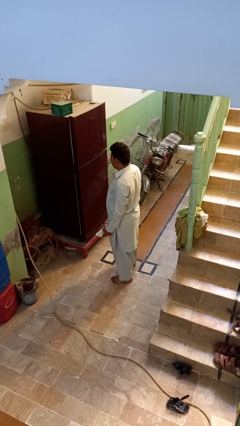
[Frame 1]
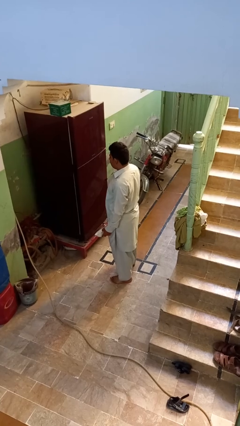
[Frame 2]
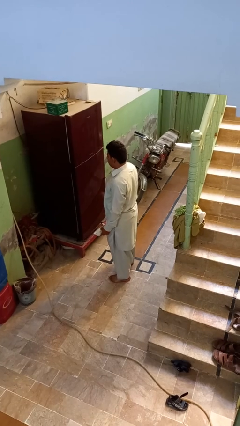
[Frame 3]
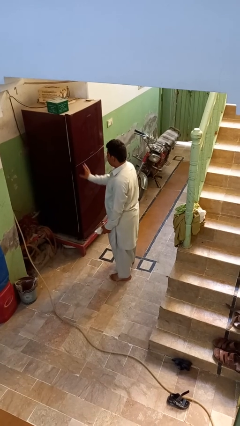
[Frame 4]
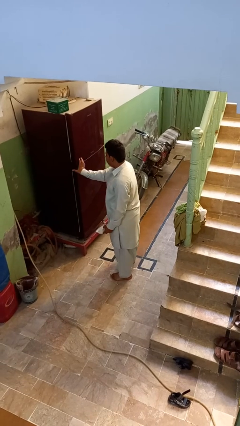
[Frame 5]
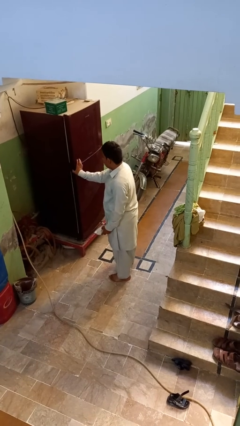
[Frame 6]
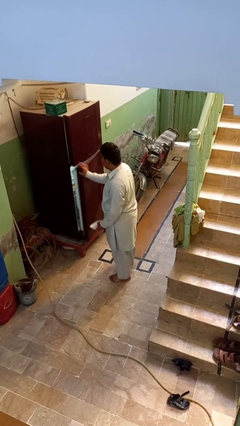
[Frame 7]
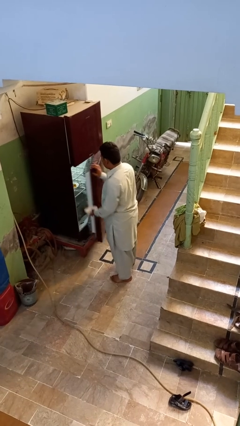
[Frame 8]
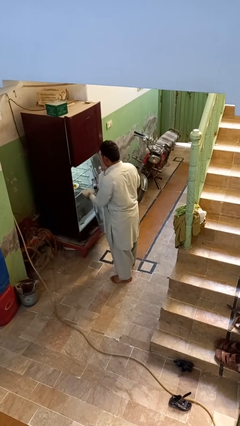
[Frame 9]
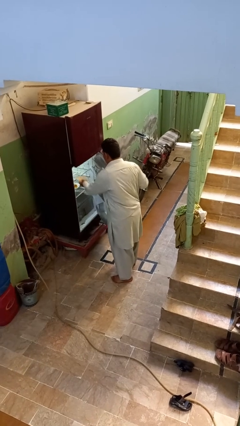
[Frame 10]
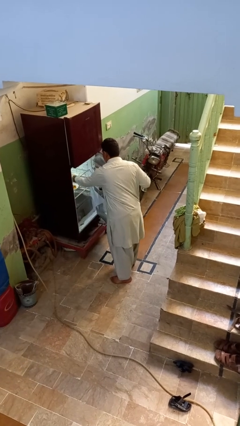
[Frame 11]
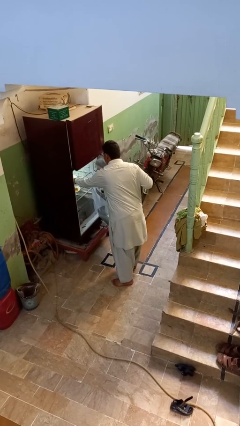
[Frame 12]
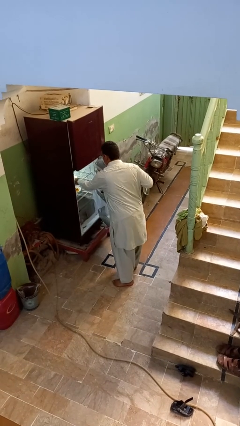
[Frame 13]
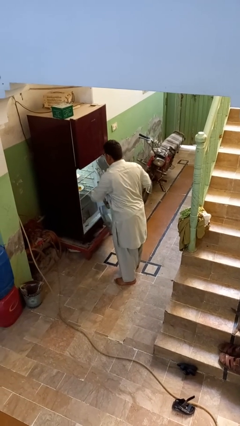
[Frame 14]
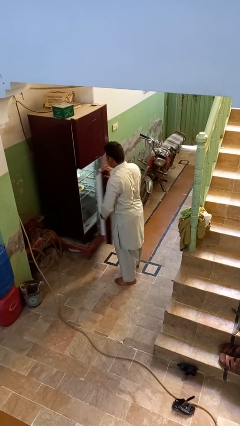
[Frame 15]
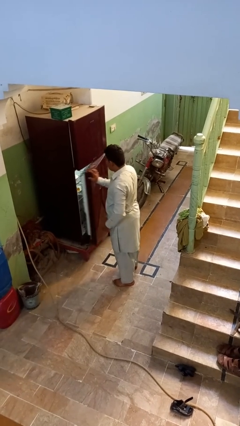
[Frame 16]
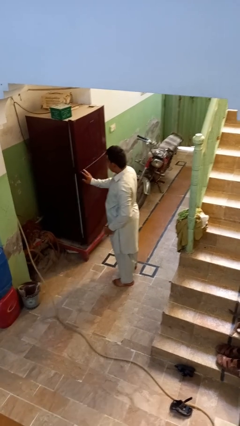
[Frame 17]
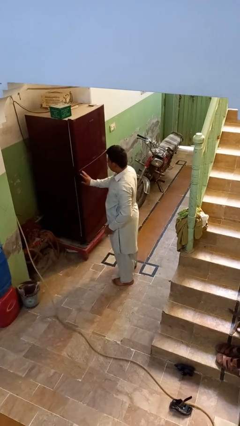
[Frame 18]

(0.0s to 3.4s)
person puts object into refrigerator

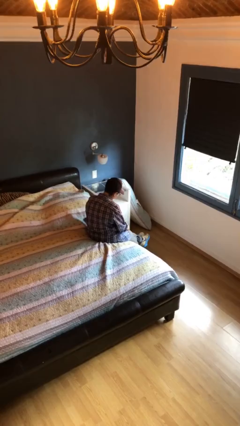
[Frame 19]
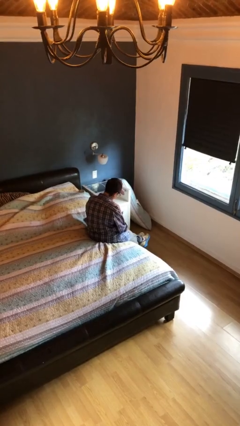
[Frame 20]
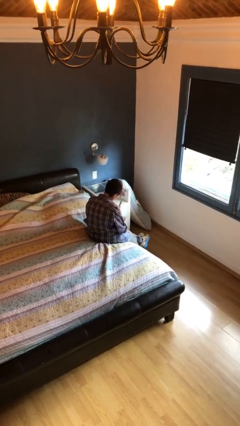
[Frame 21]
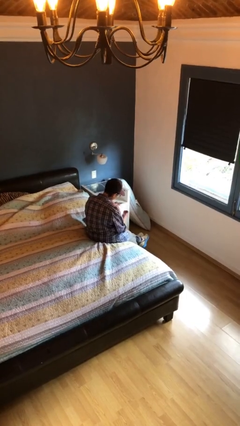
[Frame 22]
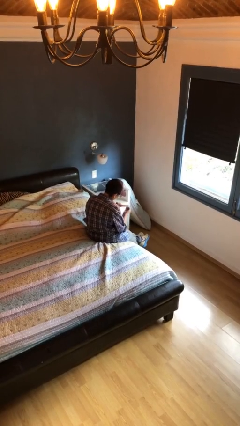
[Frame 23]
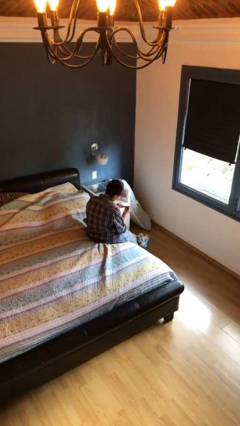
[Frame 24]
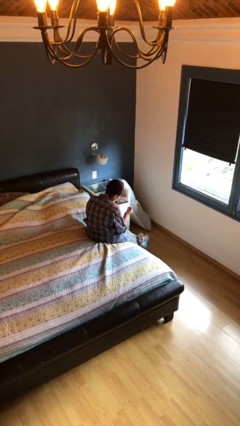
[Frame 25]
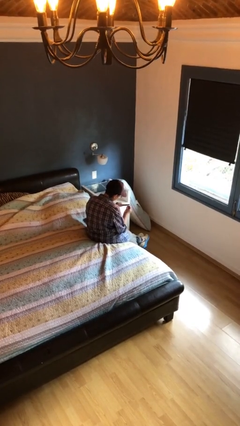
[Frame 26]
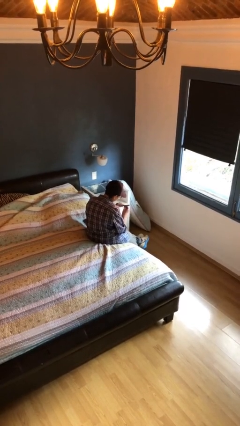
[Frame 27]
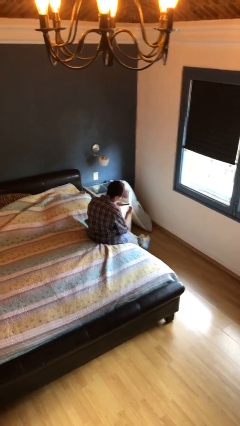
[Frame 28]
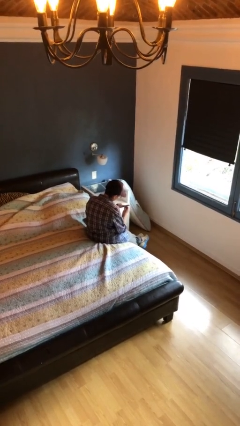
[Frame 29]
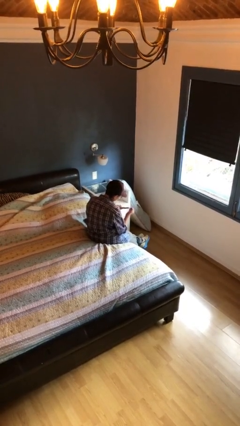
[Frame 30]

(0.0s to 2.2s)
person files fingernails

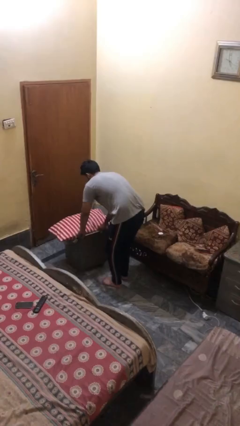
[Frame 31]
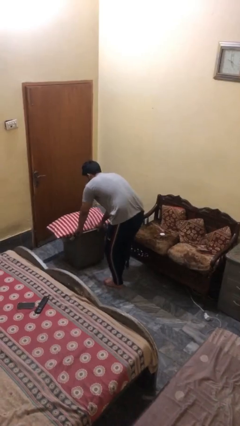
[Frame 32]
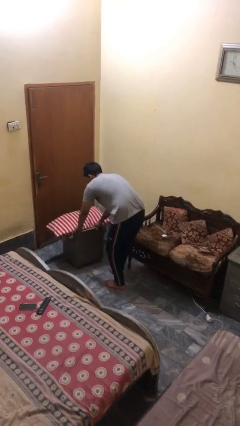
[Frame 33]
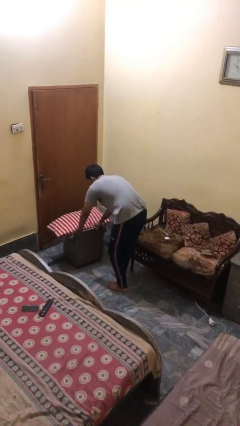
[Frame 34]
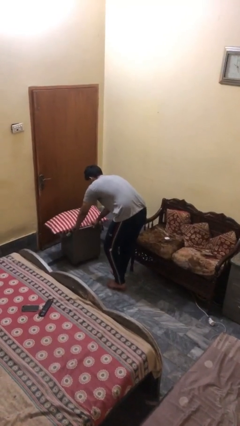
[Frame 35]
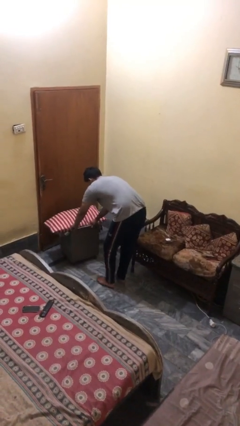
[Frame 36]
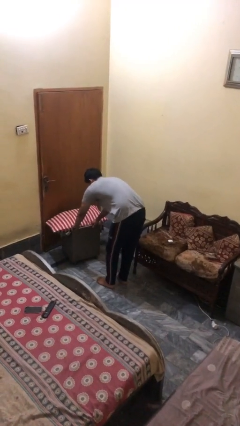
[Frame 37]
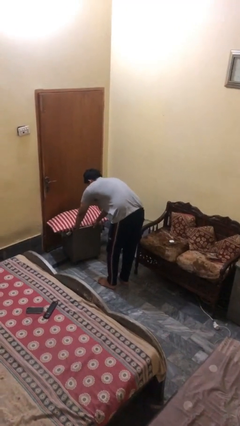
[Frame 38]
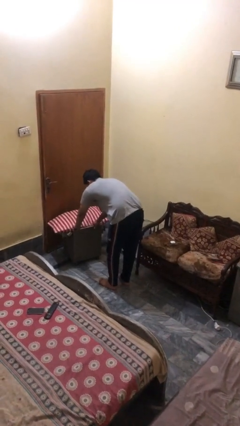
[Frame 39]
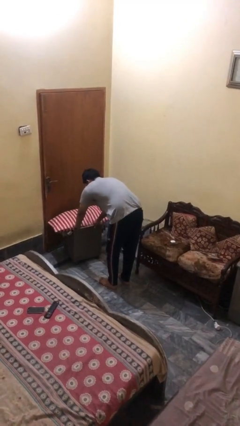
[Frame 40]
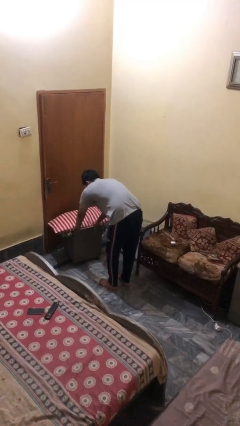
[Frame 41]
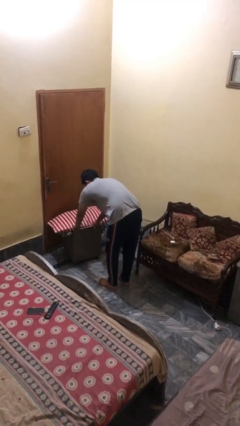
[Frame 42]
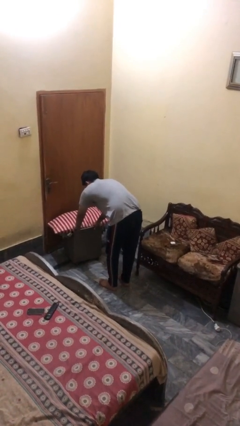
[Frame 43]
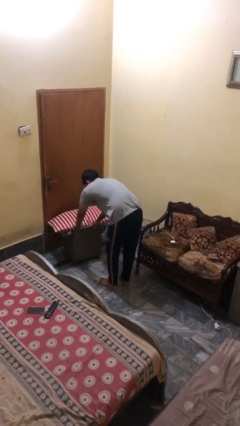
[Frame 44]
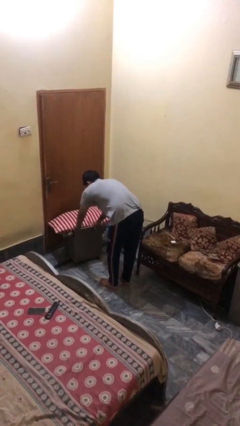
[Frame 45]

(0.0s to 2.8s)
person pushes wheeled cart

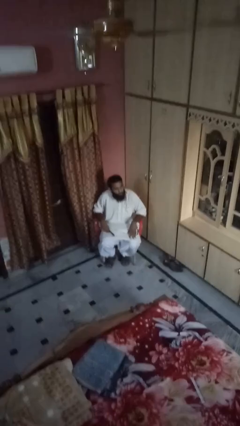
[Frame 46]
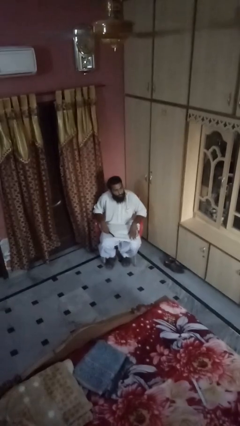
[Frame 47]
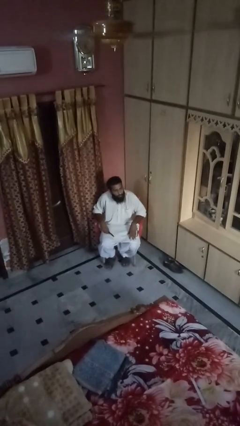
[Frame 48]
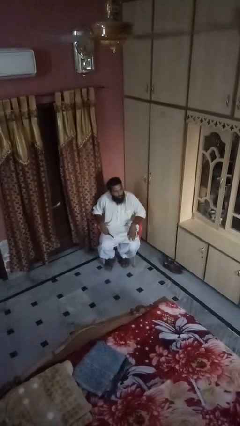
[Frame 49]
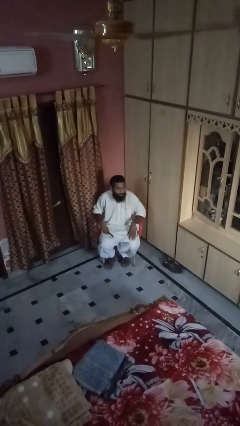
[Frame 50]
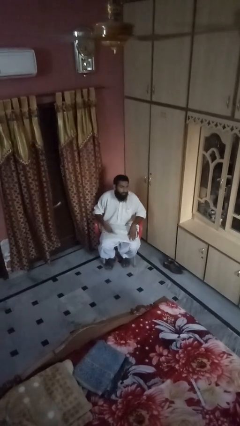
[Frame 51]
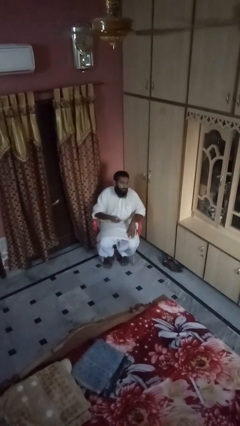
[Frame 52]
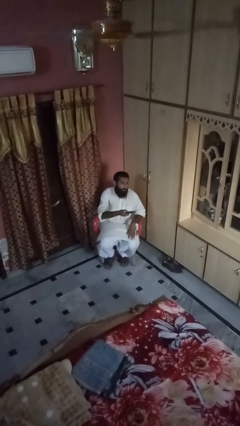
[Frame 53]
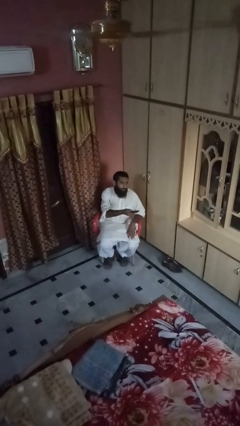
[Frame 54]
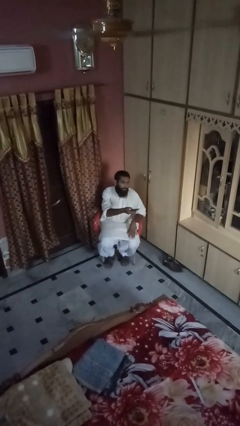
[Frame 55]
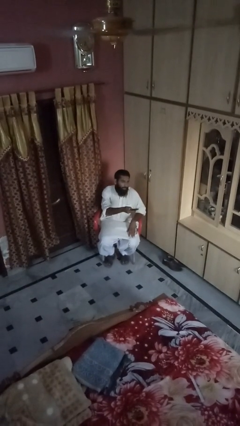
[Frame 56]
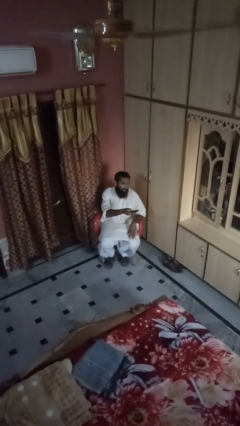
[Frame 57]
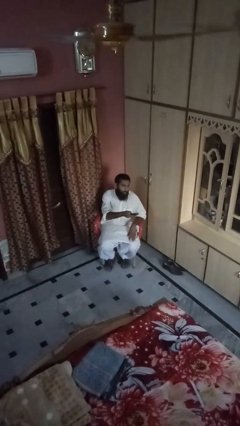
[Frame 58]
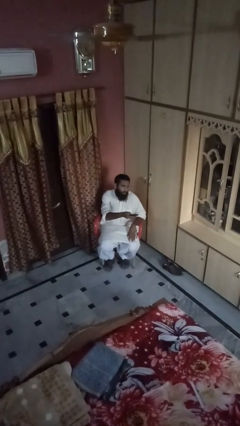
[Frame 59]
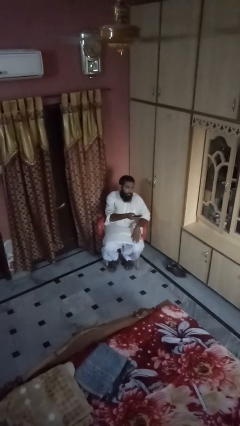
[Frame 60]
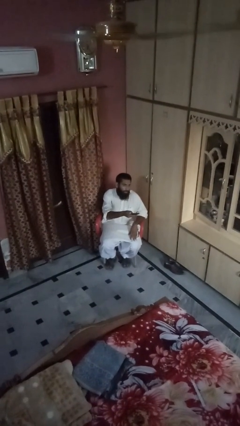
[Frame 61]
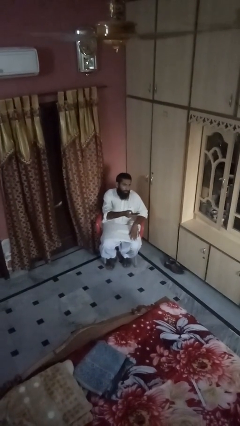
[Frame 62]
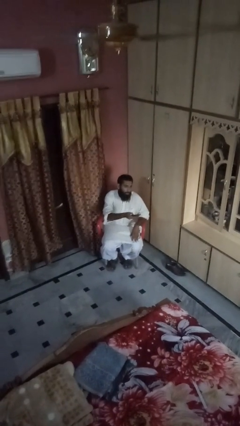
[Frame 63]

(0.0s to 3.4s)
person uses television remote

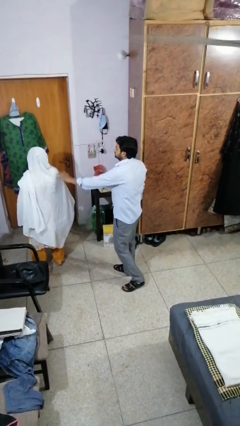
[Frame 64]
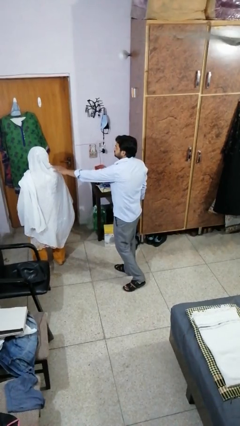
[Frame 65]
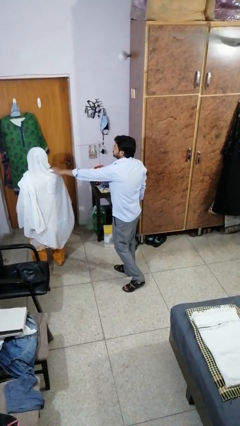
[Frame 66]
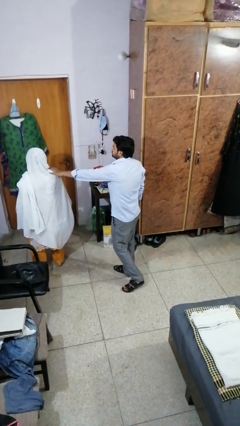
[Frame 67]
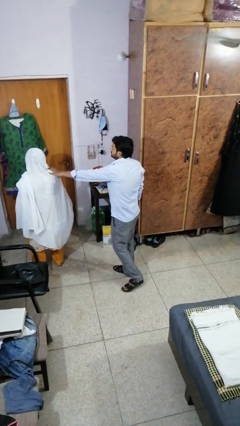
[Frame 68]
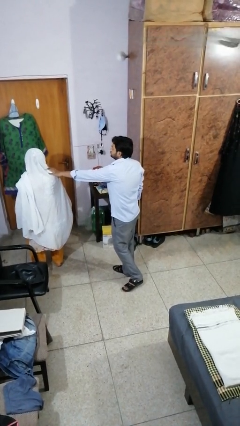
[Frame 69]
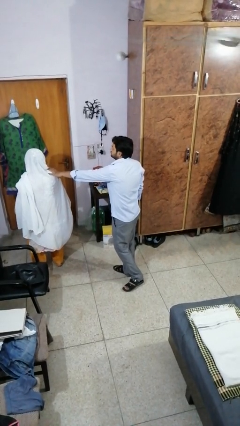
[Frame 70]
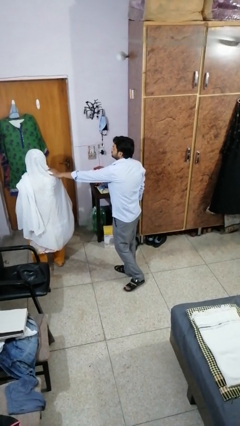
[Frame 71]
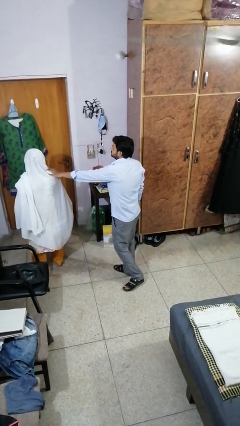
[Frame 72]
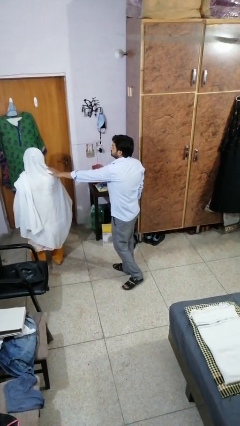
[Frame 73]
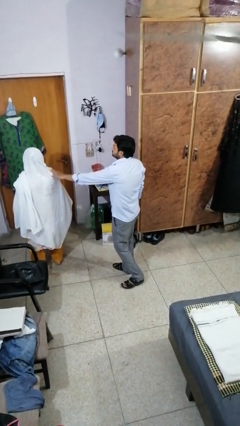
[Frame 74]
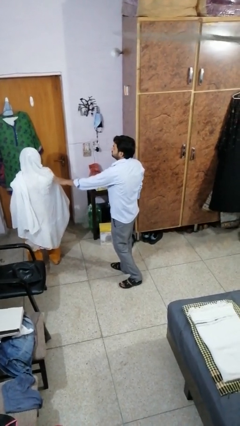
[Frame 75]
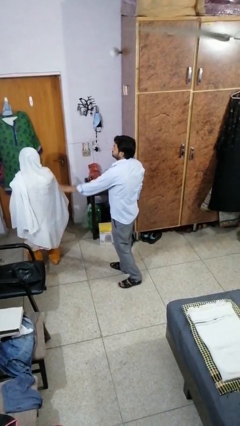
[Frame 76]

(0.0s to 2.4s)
person touches back of person

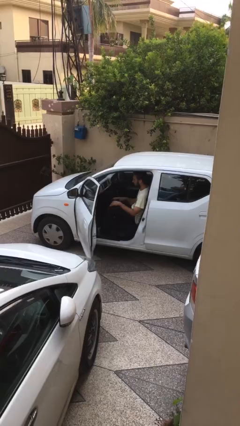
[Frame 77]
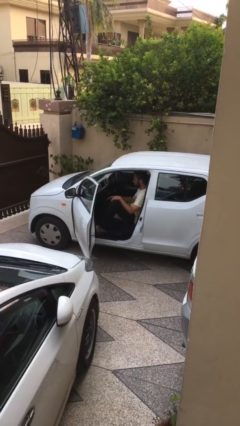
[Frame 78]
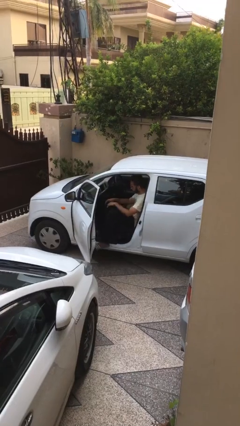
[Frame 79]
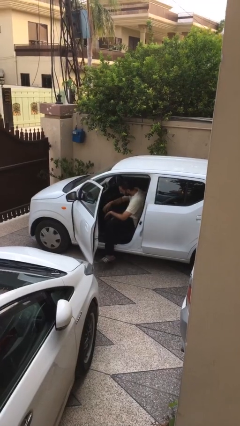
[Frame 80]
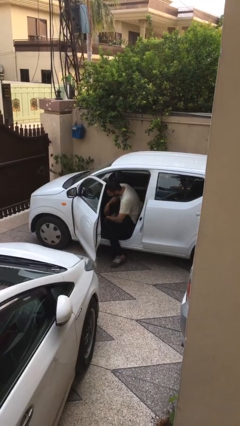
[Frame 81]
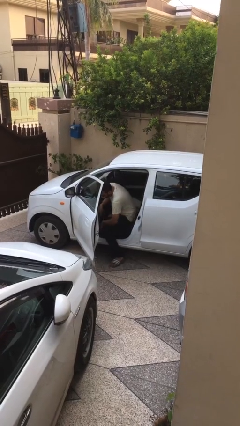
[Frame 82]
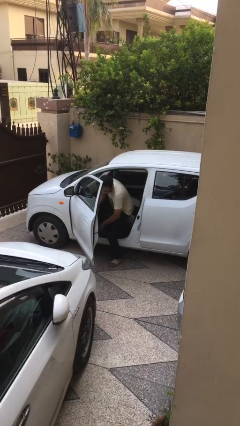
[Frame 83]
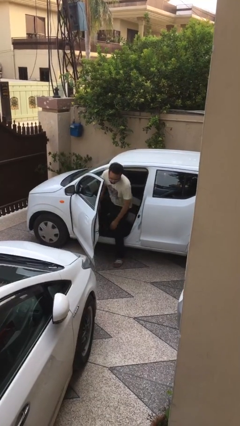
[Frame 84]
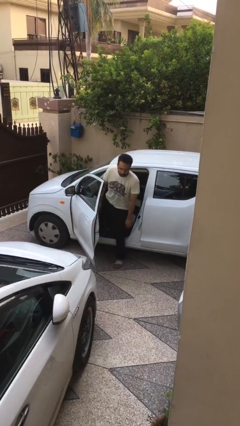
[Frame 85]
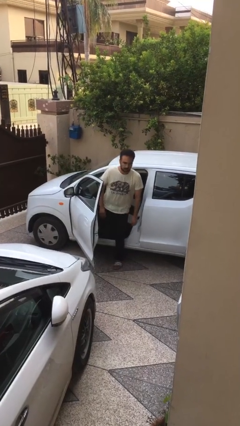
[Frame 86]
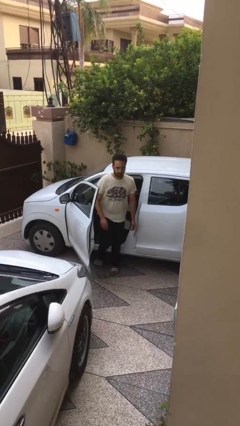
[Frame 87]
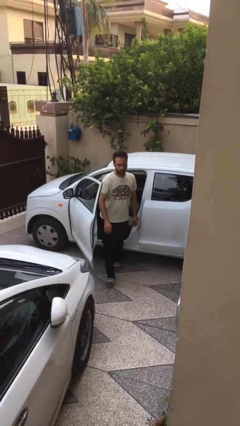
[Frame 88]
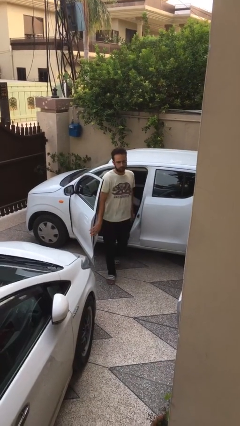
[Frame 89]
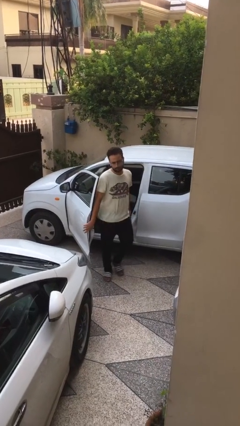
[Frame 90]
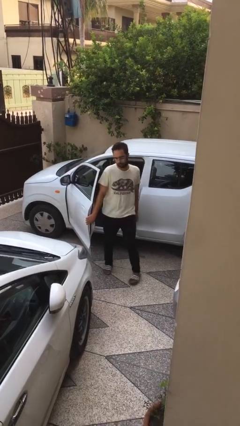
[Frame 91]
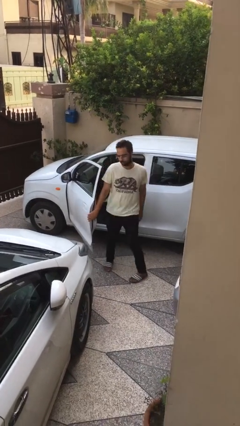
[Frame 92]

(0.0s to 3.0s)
person exits car

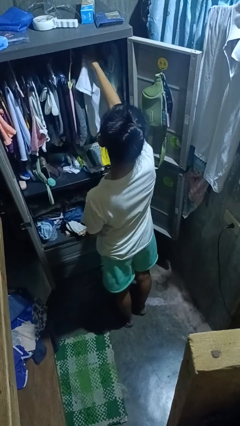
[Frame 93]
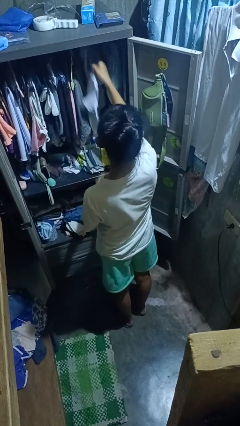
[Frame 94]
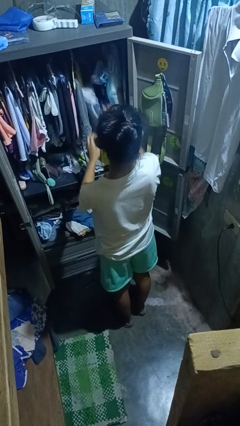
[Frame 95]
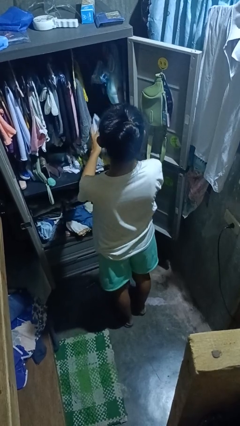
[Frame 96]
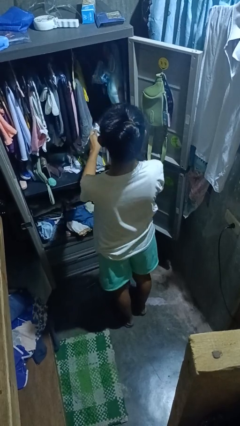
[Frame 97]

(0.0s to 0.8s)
person takes clothes from closet
